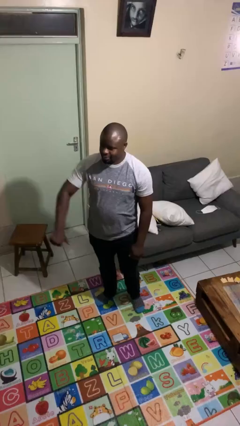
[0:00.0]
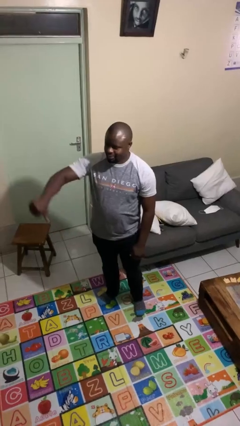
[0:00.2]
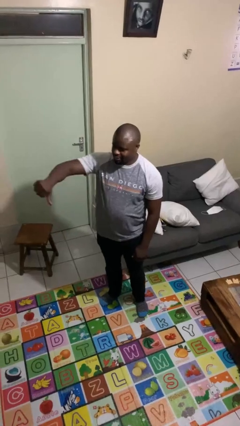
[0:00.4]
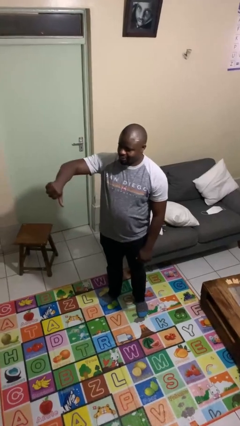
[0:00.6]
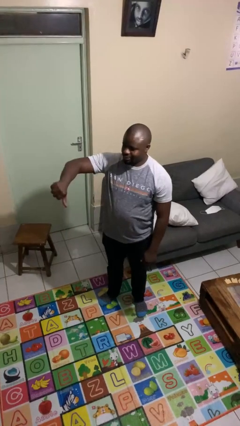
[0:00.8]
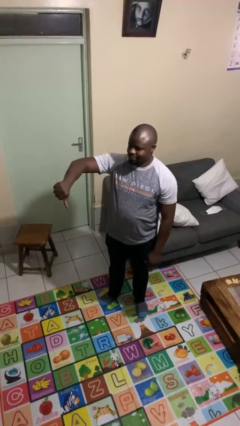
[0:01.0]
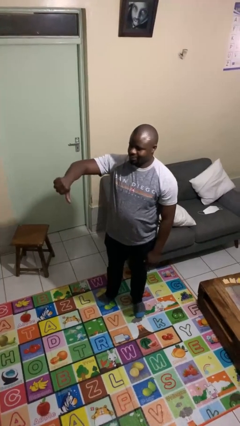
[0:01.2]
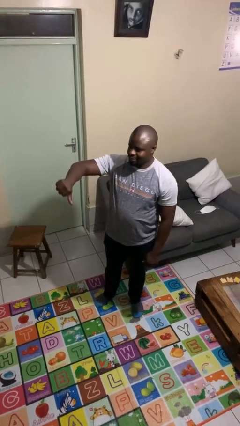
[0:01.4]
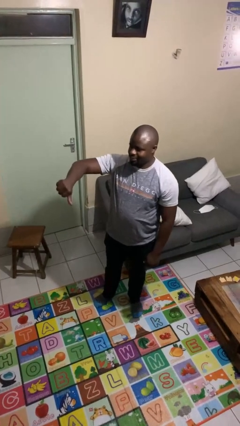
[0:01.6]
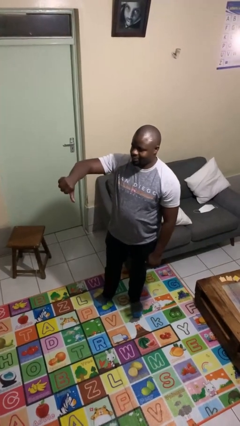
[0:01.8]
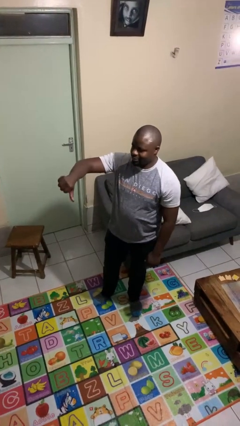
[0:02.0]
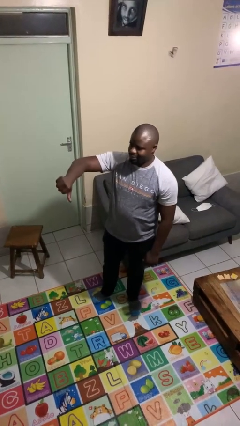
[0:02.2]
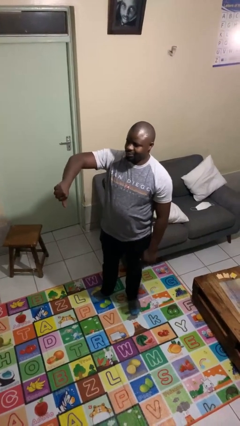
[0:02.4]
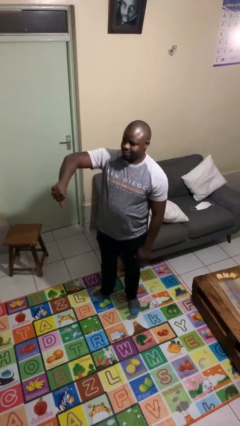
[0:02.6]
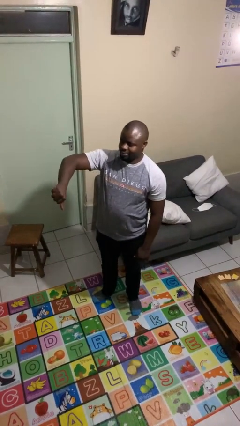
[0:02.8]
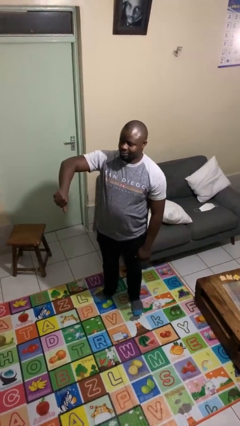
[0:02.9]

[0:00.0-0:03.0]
person gestures thumbs down

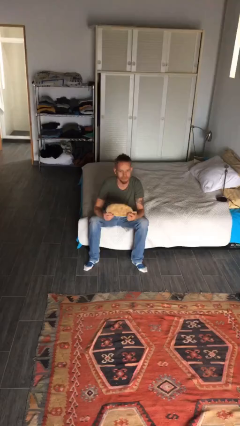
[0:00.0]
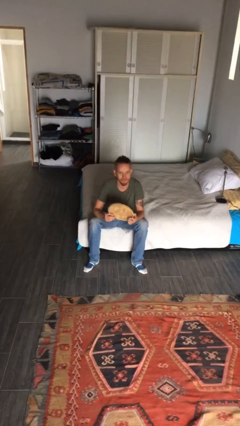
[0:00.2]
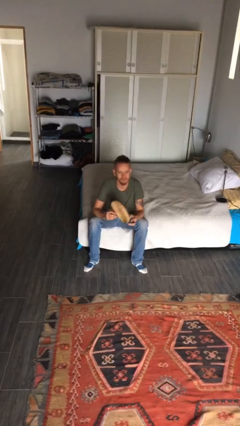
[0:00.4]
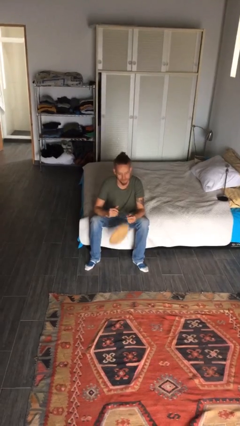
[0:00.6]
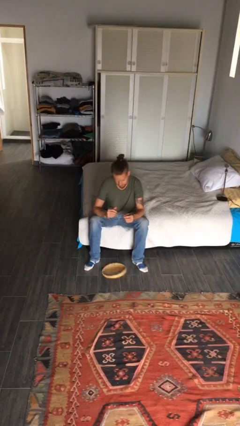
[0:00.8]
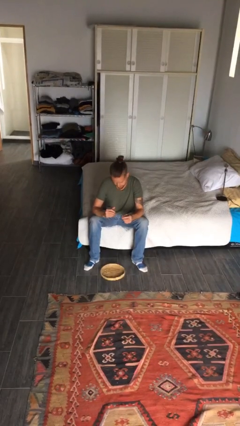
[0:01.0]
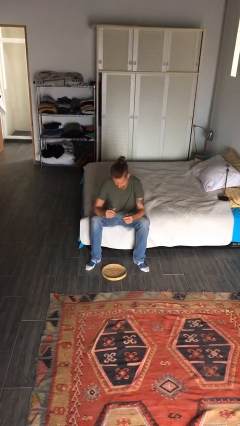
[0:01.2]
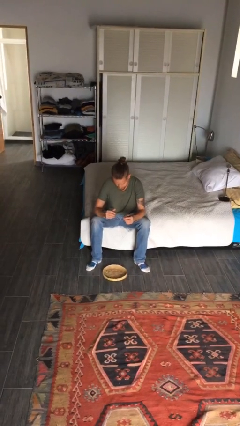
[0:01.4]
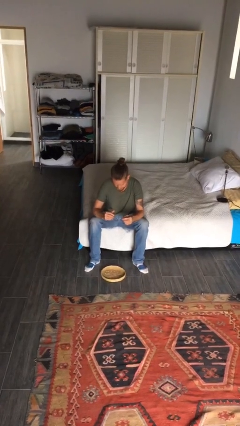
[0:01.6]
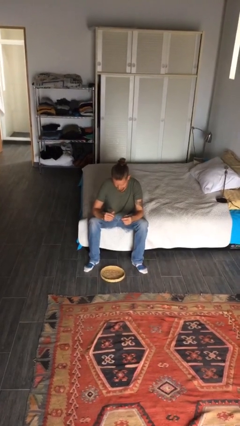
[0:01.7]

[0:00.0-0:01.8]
person drops object

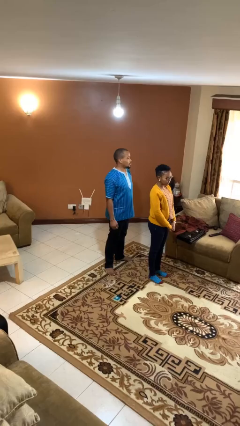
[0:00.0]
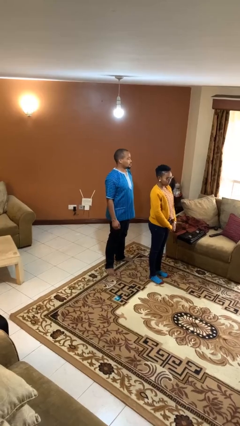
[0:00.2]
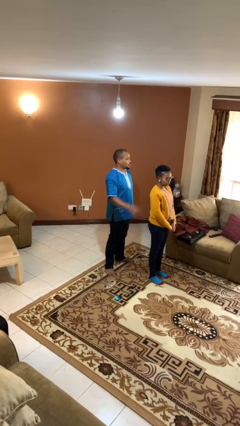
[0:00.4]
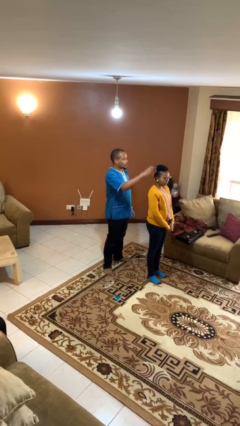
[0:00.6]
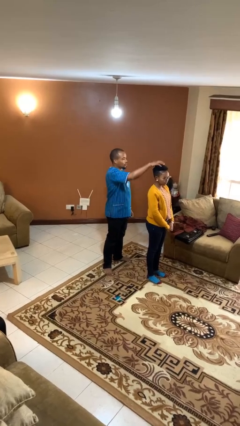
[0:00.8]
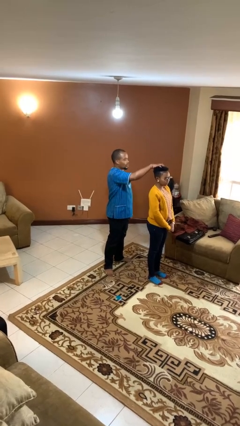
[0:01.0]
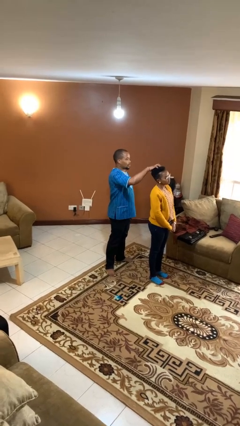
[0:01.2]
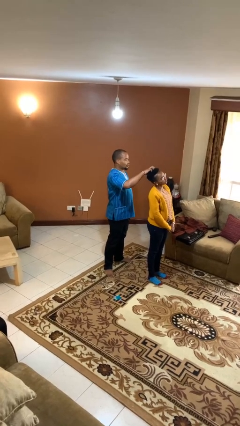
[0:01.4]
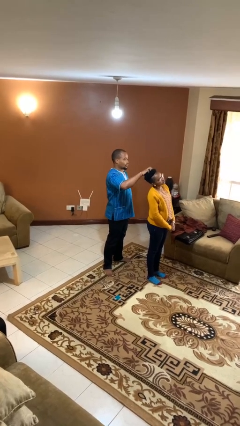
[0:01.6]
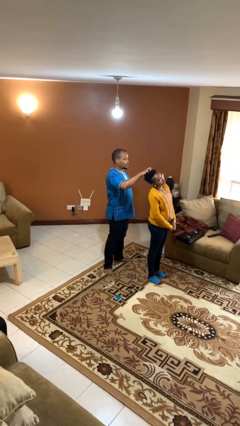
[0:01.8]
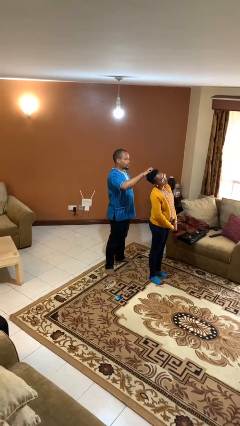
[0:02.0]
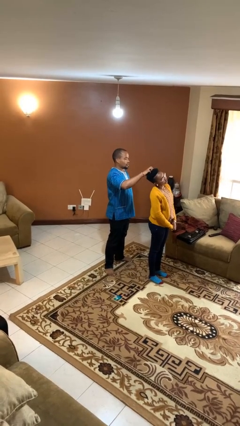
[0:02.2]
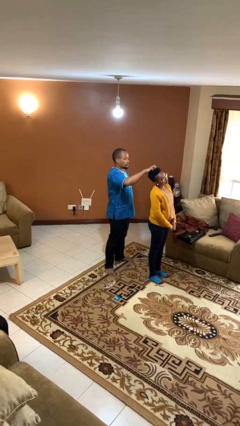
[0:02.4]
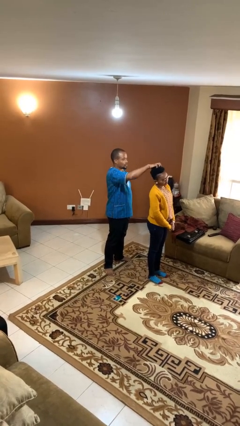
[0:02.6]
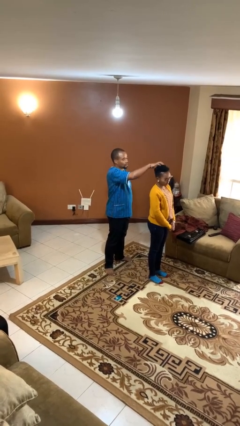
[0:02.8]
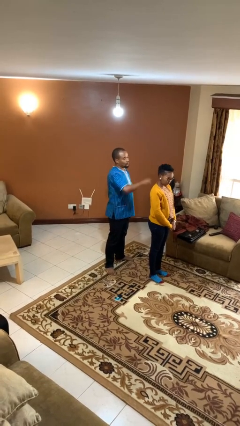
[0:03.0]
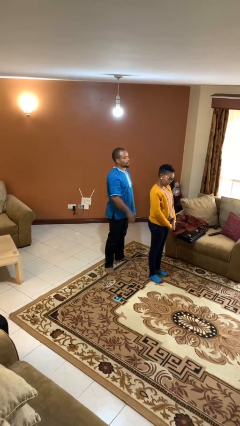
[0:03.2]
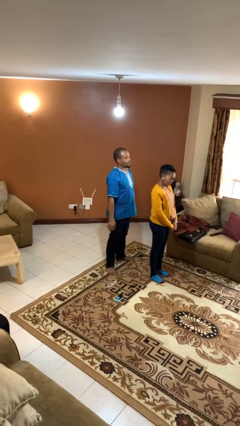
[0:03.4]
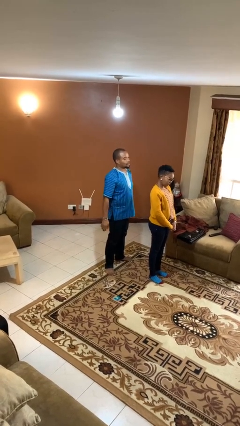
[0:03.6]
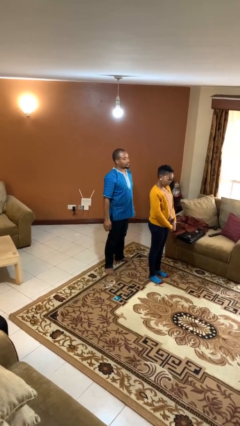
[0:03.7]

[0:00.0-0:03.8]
person grabs person by hair

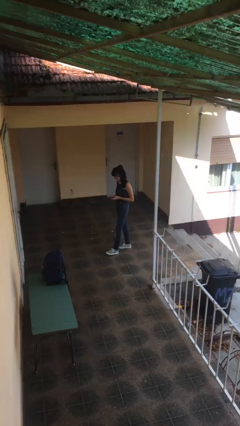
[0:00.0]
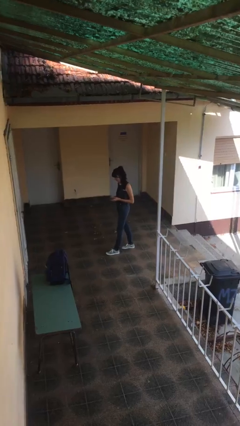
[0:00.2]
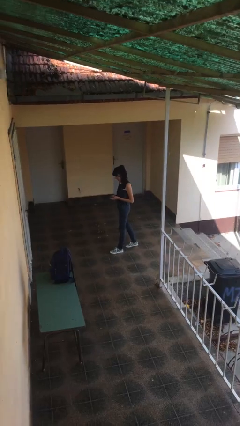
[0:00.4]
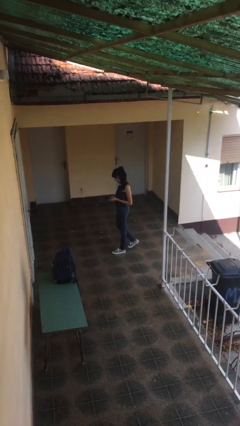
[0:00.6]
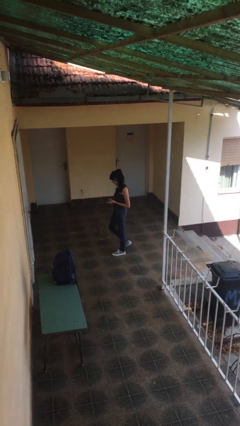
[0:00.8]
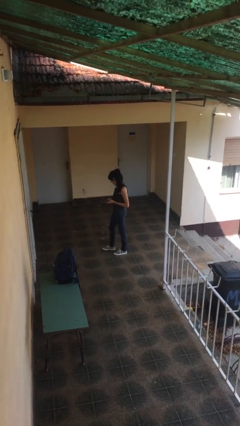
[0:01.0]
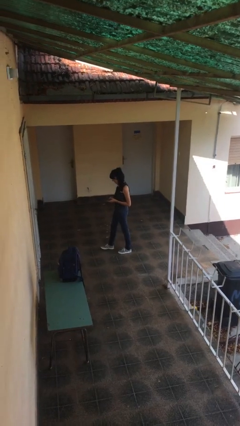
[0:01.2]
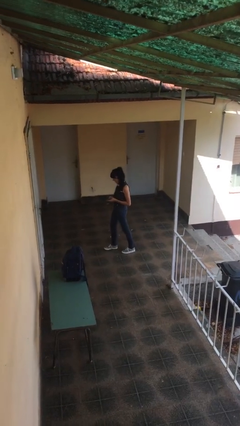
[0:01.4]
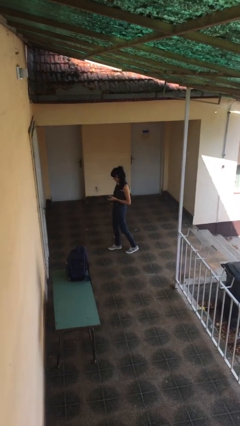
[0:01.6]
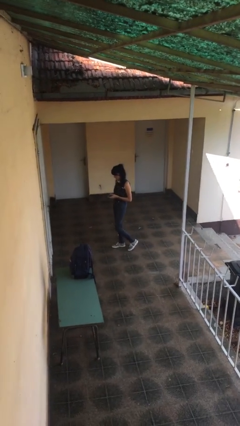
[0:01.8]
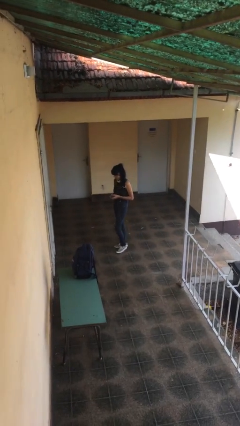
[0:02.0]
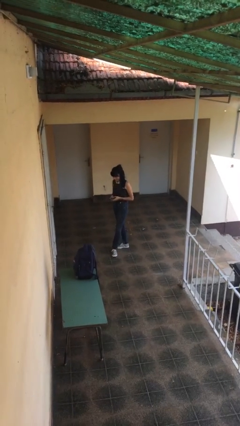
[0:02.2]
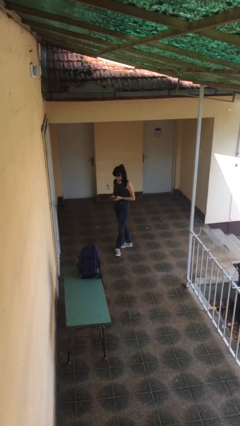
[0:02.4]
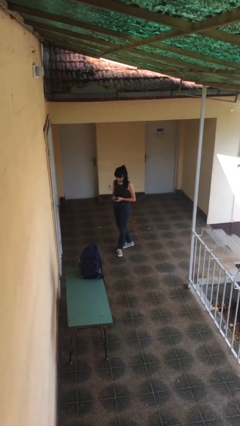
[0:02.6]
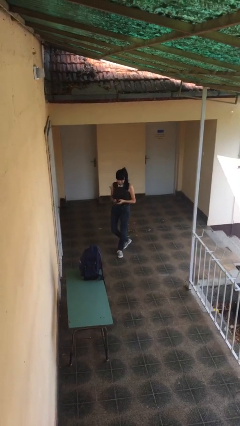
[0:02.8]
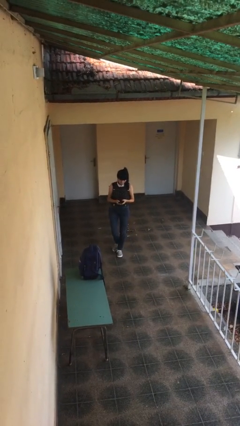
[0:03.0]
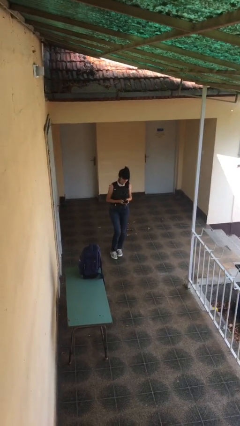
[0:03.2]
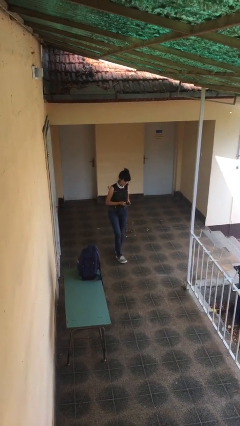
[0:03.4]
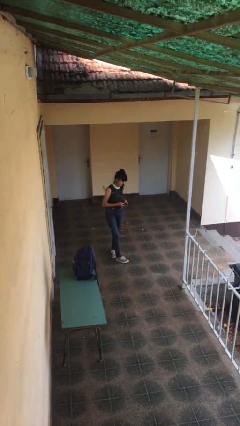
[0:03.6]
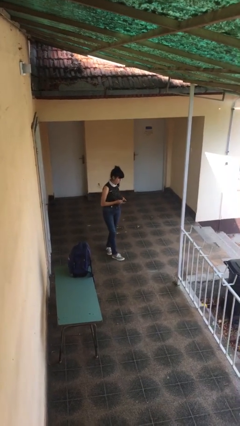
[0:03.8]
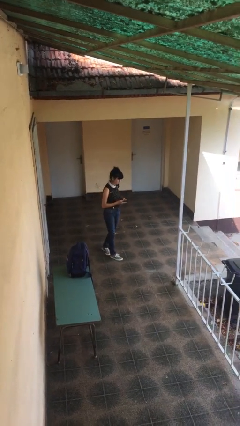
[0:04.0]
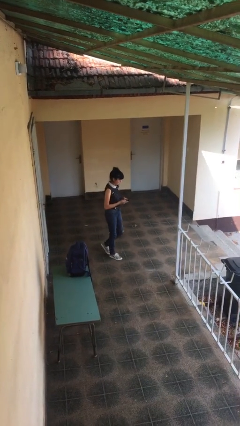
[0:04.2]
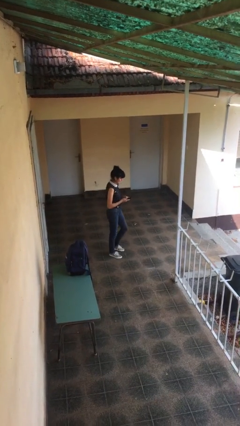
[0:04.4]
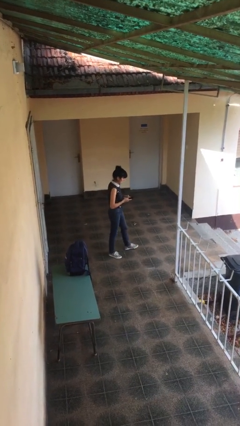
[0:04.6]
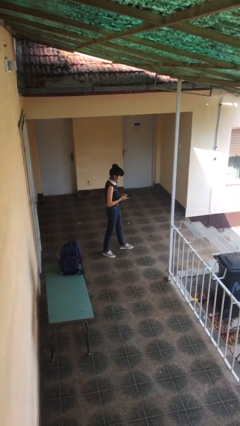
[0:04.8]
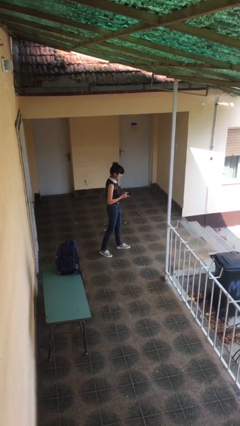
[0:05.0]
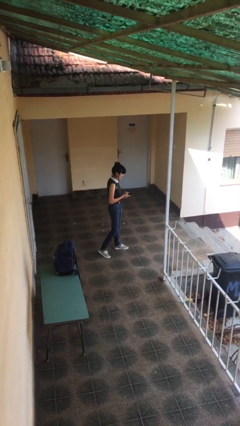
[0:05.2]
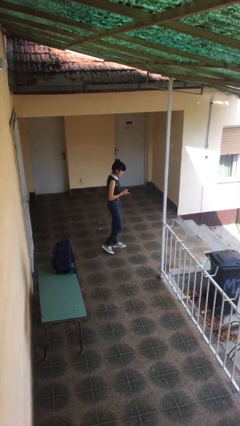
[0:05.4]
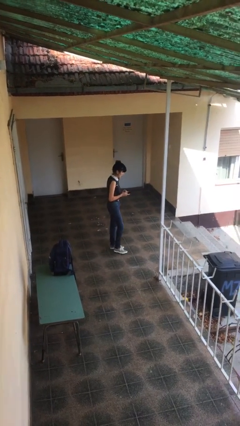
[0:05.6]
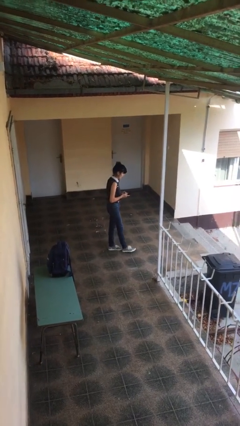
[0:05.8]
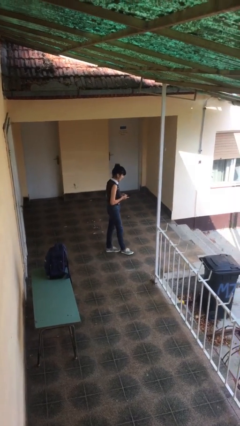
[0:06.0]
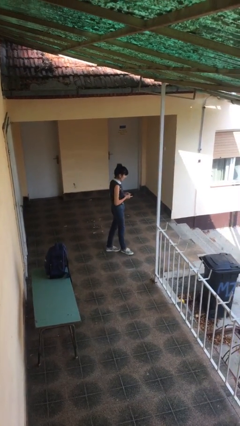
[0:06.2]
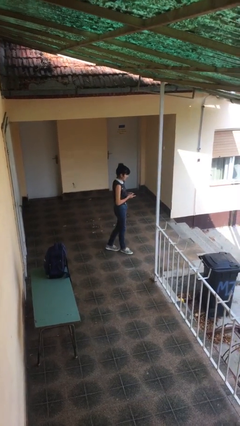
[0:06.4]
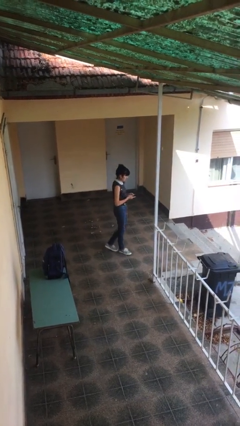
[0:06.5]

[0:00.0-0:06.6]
person texts on phone

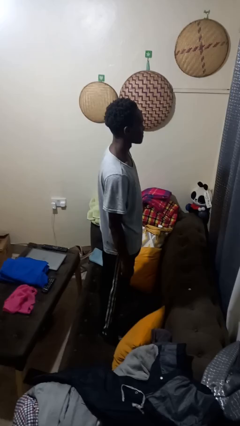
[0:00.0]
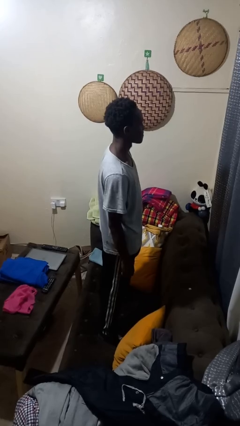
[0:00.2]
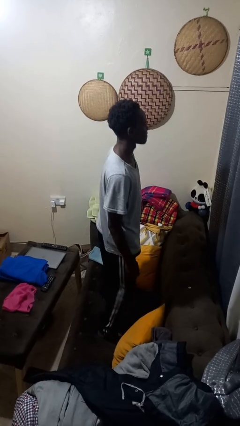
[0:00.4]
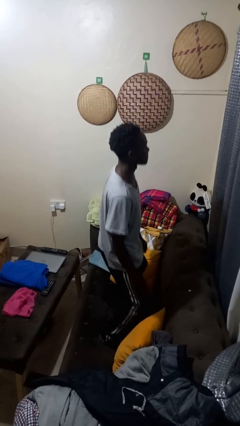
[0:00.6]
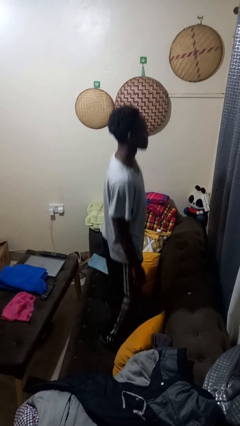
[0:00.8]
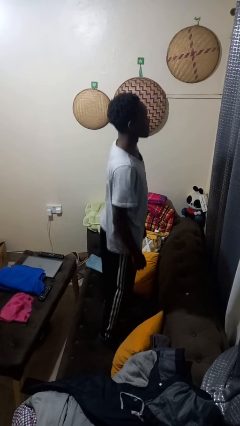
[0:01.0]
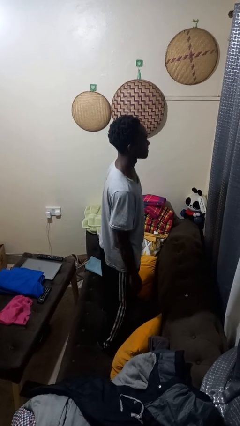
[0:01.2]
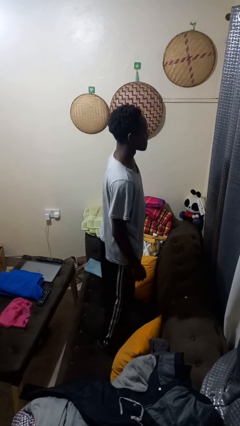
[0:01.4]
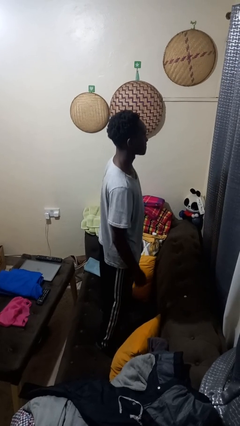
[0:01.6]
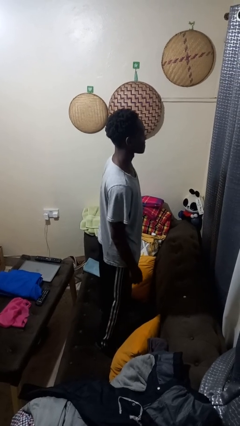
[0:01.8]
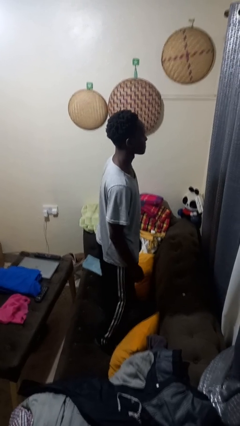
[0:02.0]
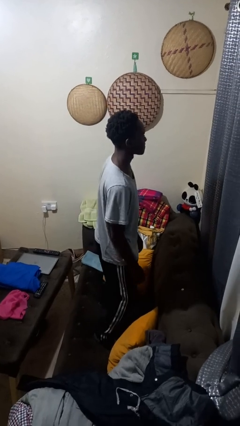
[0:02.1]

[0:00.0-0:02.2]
person jumps on couch
